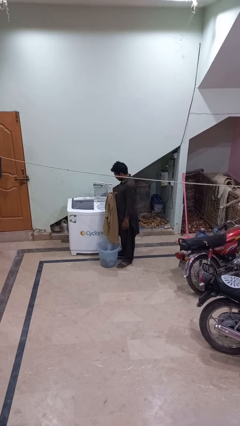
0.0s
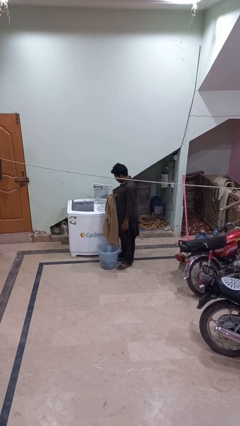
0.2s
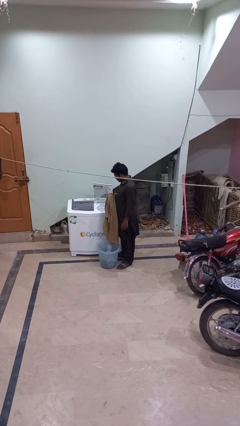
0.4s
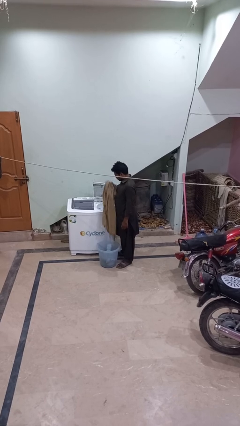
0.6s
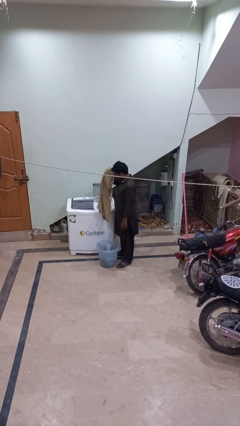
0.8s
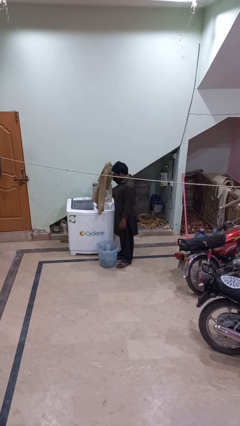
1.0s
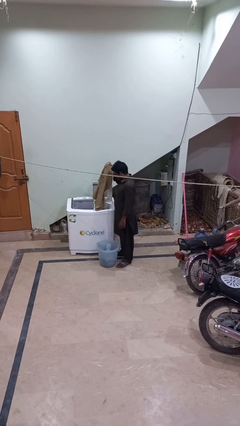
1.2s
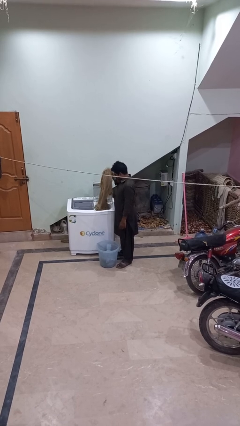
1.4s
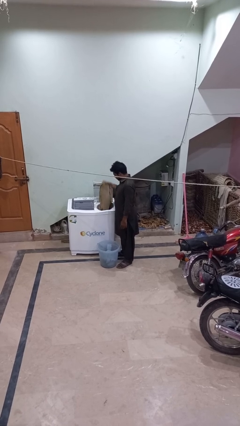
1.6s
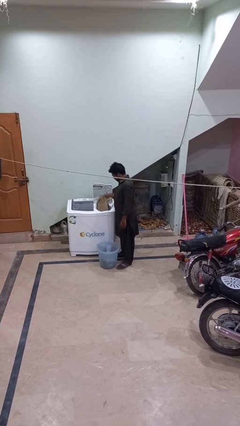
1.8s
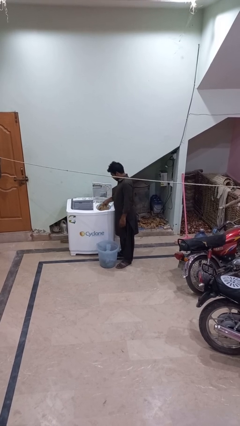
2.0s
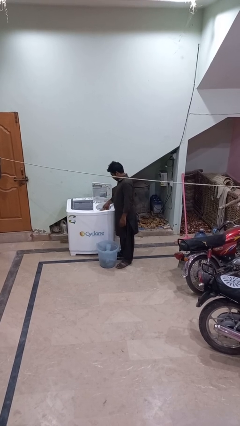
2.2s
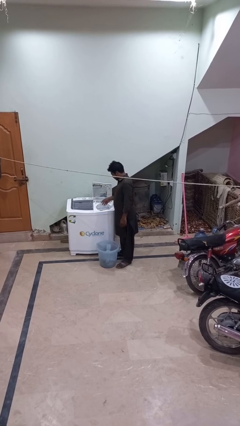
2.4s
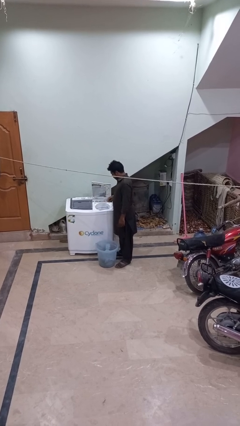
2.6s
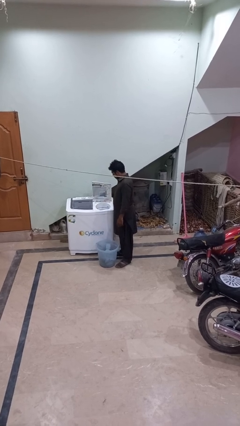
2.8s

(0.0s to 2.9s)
person loads dryer

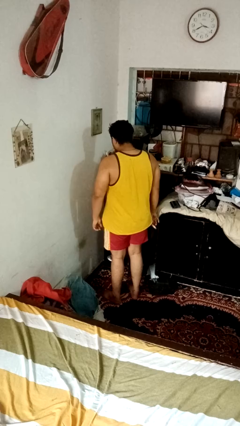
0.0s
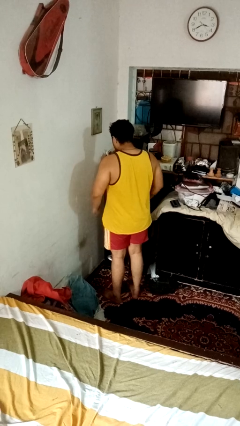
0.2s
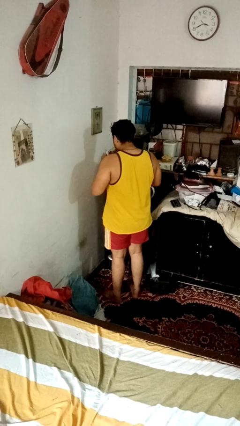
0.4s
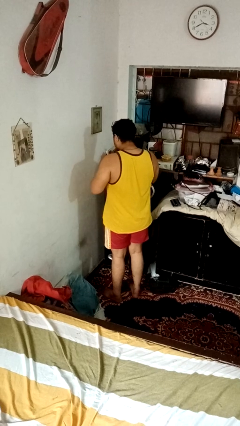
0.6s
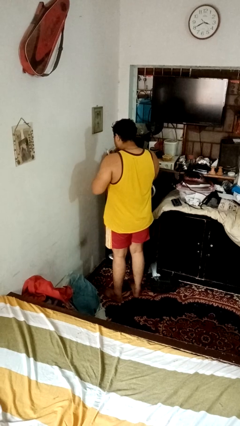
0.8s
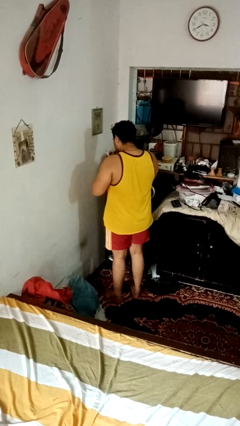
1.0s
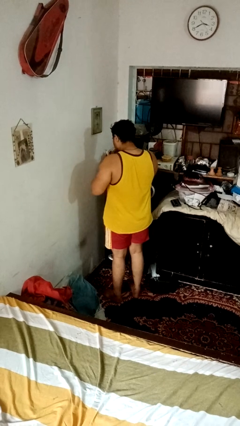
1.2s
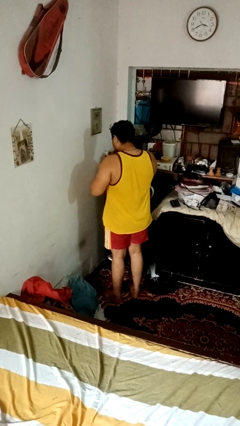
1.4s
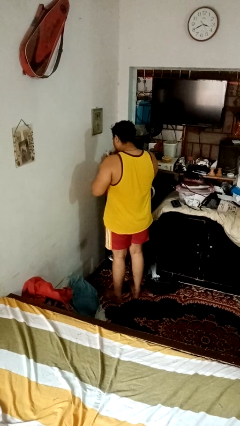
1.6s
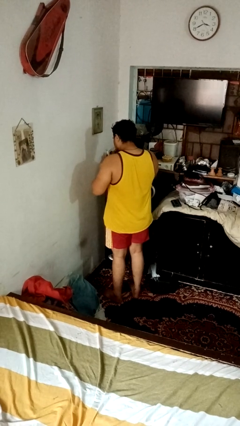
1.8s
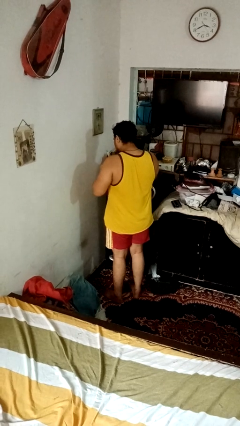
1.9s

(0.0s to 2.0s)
person clips fingernails

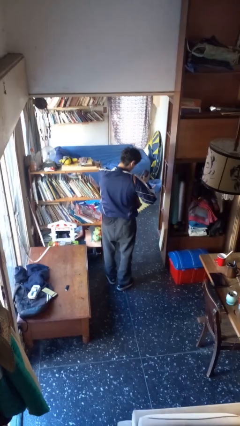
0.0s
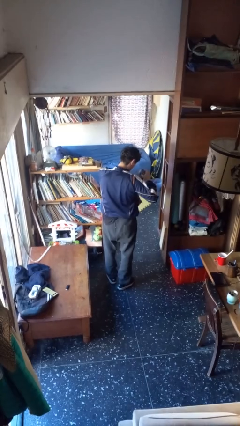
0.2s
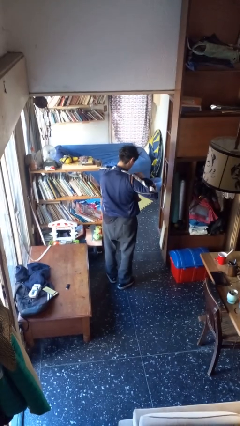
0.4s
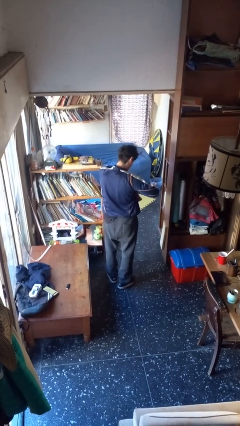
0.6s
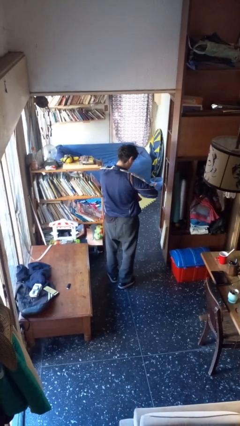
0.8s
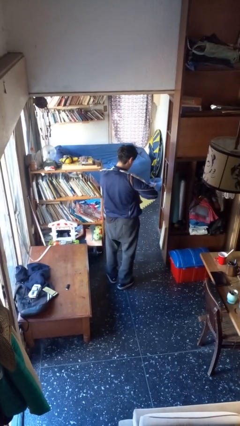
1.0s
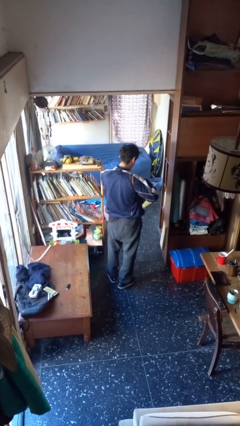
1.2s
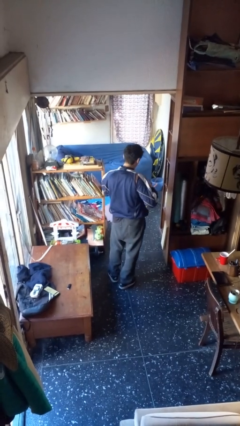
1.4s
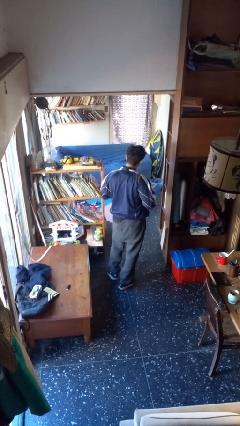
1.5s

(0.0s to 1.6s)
person puts object into purse

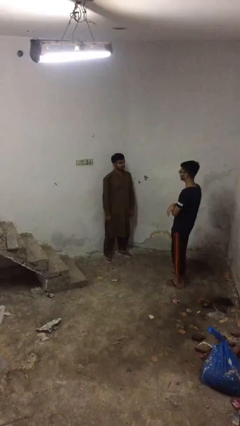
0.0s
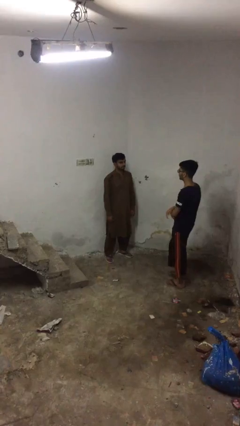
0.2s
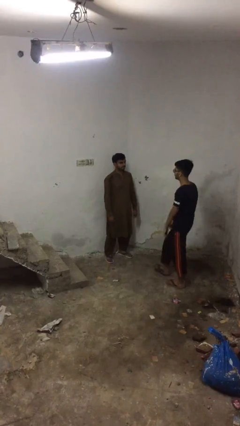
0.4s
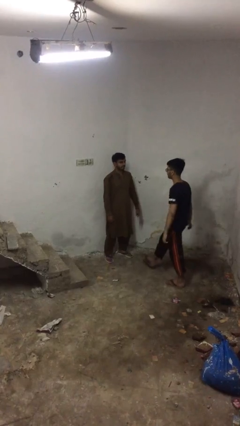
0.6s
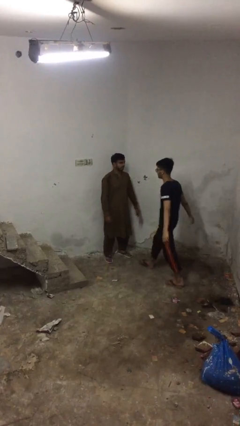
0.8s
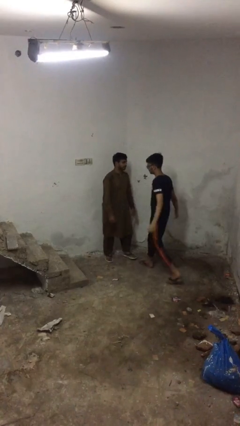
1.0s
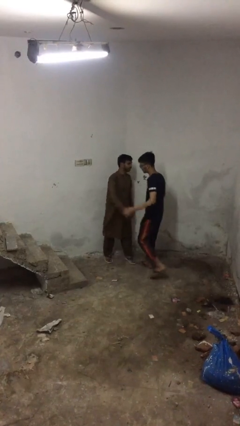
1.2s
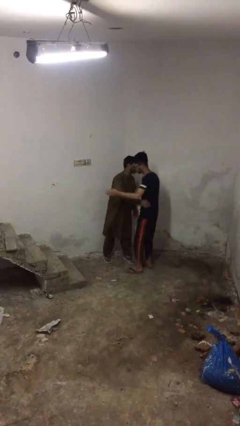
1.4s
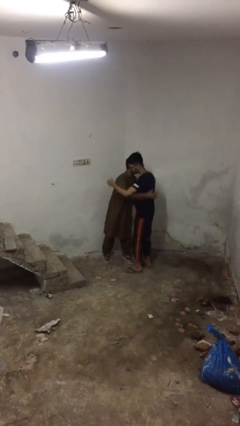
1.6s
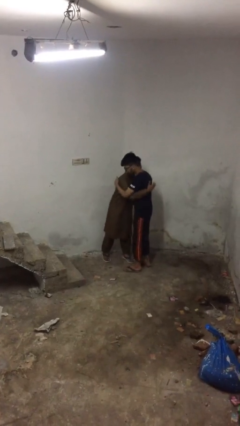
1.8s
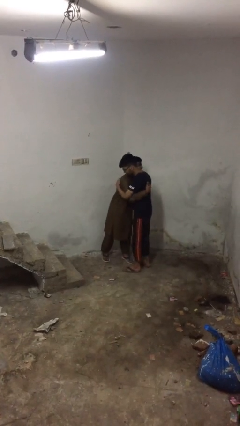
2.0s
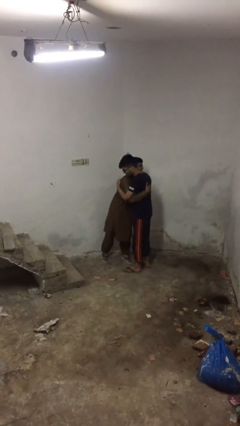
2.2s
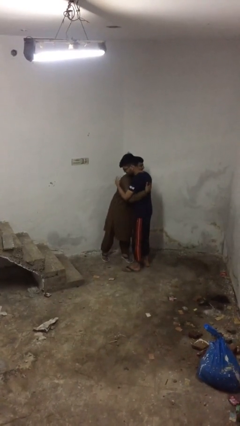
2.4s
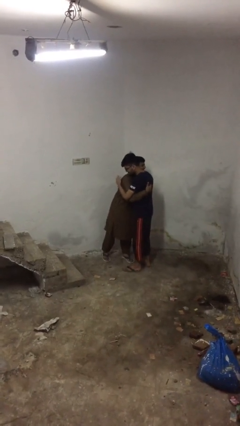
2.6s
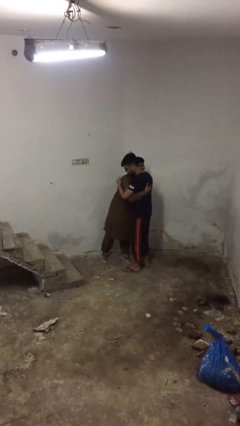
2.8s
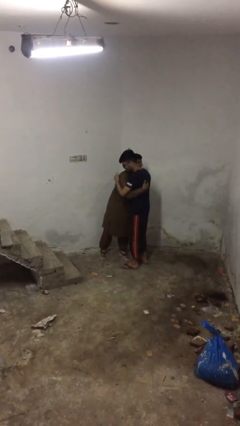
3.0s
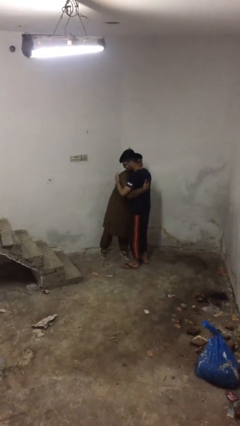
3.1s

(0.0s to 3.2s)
person embraces person

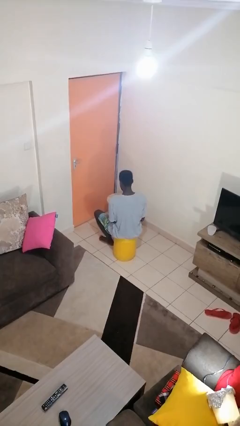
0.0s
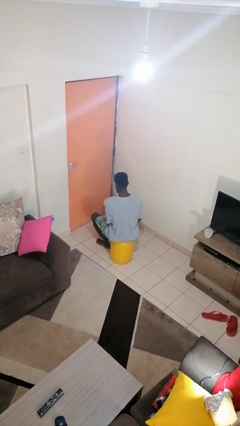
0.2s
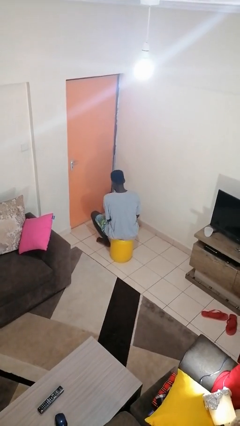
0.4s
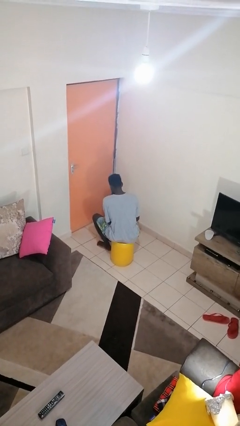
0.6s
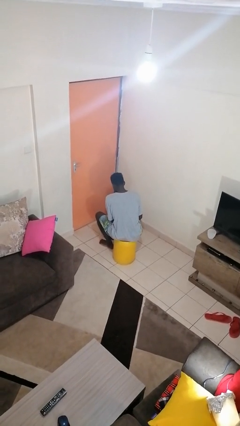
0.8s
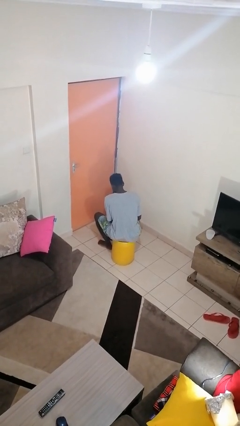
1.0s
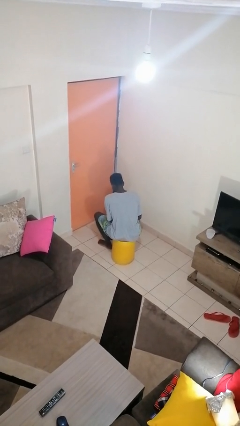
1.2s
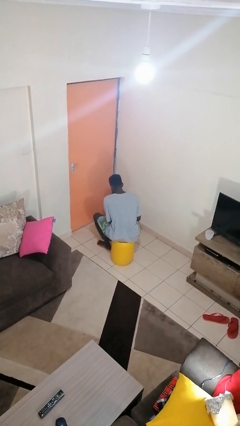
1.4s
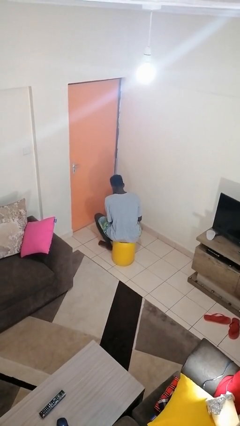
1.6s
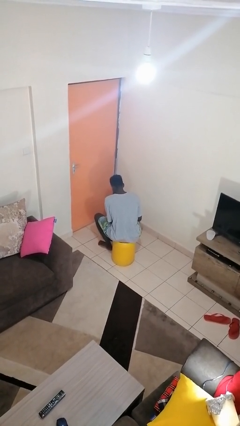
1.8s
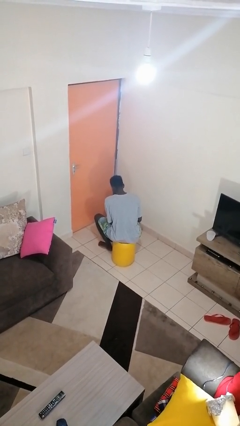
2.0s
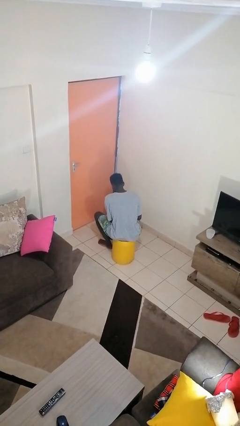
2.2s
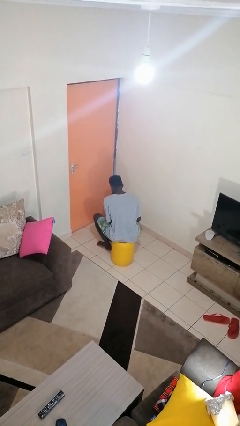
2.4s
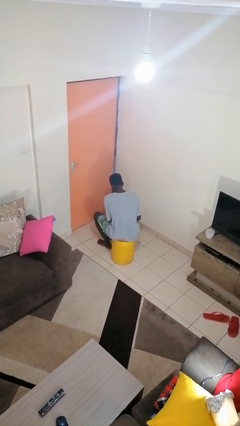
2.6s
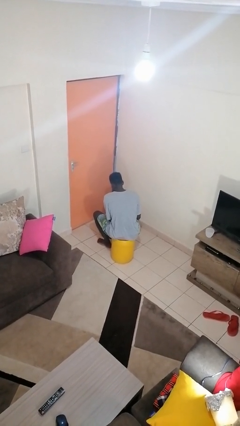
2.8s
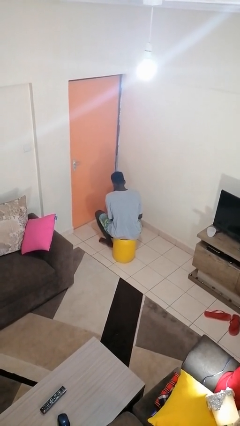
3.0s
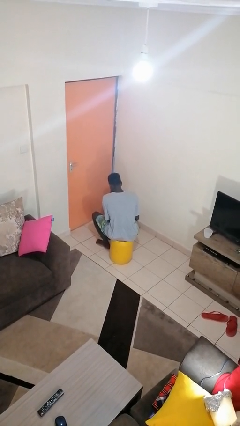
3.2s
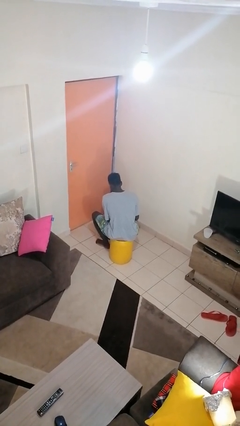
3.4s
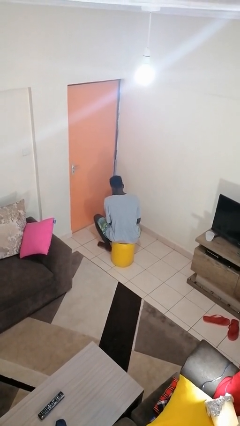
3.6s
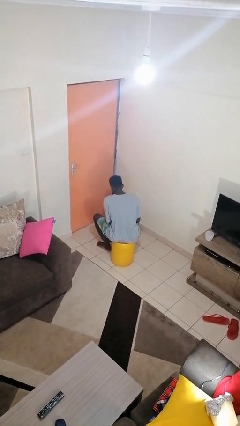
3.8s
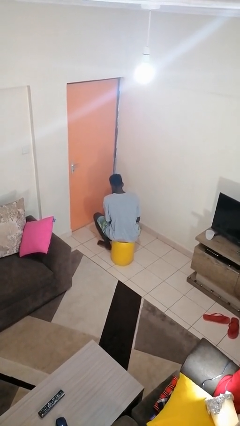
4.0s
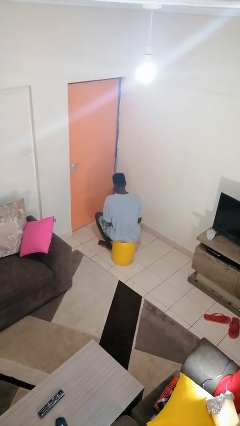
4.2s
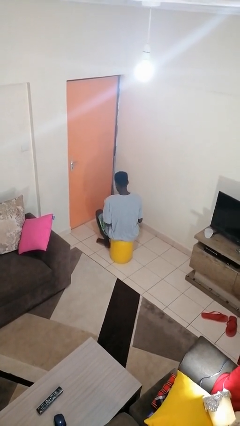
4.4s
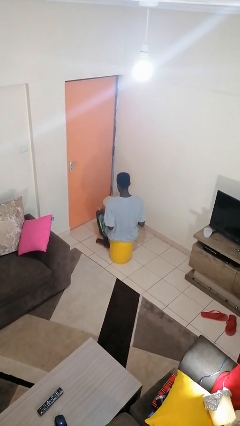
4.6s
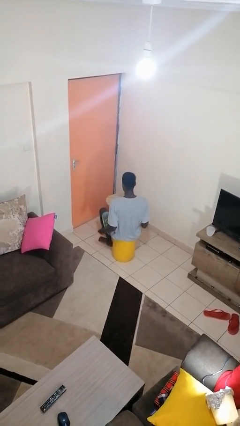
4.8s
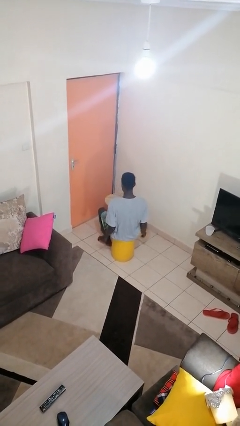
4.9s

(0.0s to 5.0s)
person paints fingernails

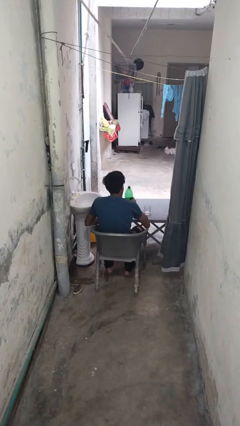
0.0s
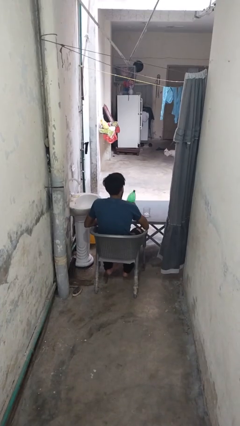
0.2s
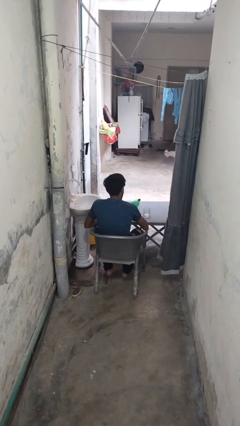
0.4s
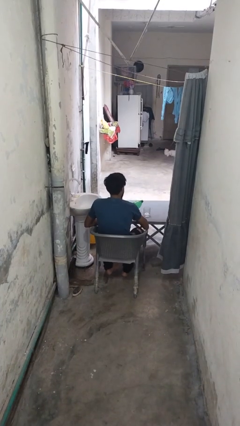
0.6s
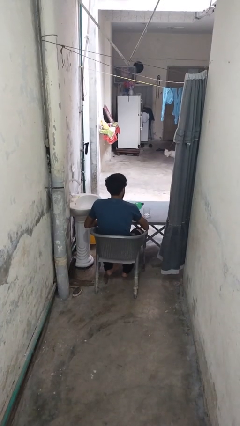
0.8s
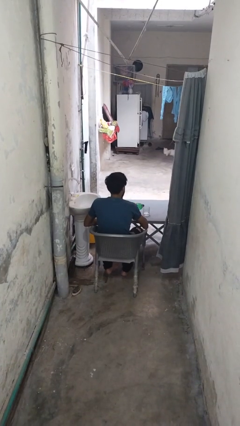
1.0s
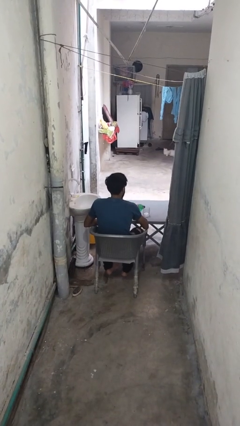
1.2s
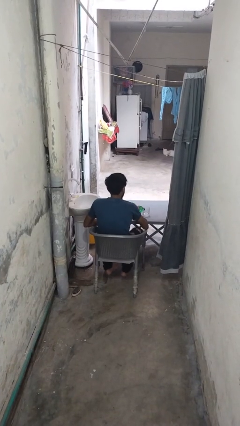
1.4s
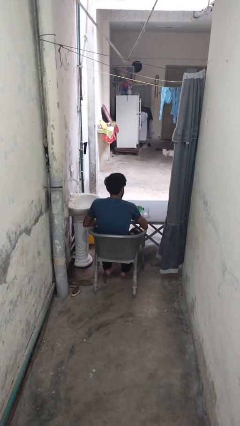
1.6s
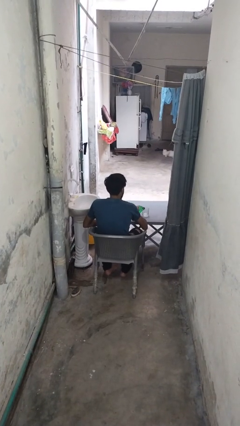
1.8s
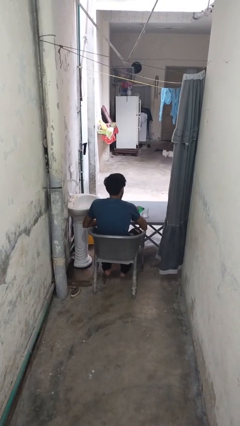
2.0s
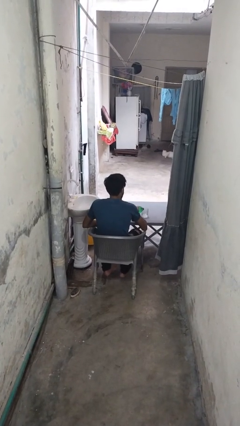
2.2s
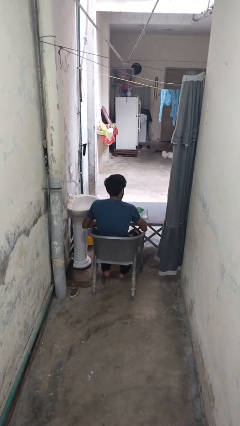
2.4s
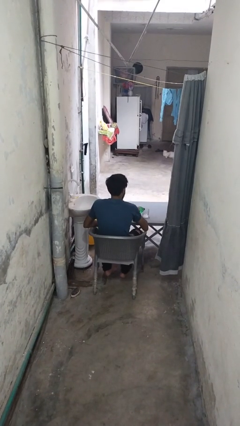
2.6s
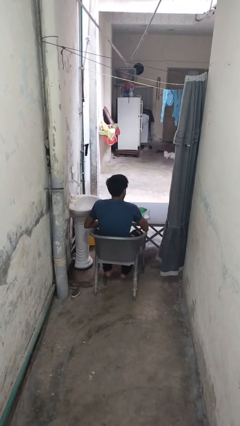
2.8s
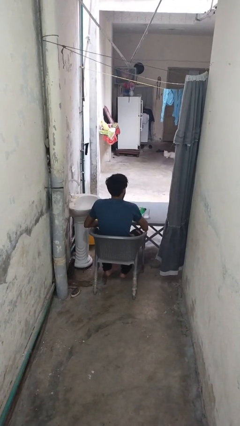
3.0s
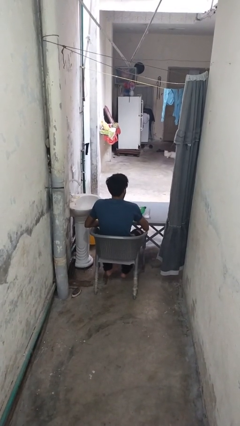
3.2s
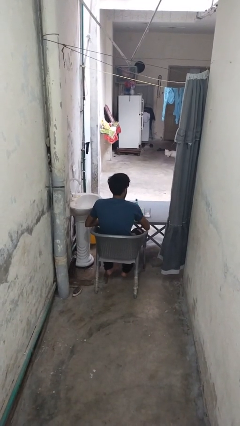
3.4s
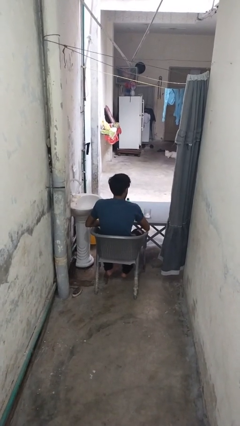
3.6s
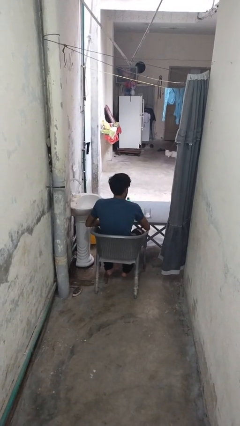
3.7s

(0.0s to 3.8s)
person pours liquid into cup
